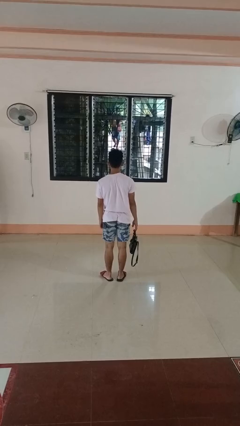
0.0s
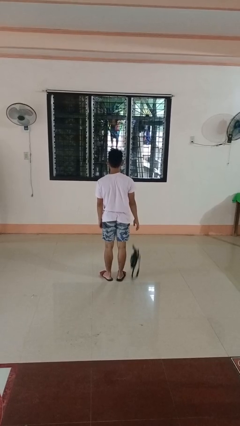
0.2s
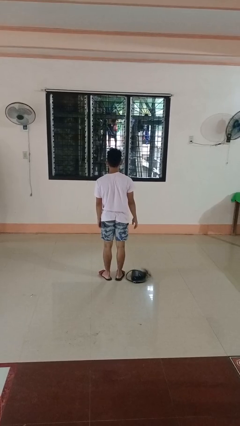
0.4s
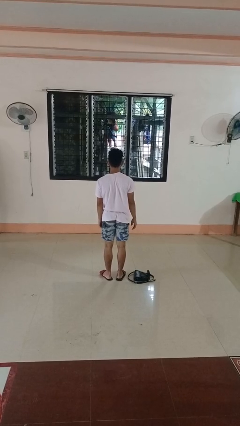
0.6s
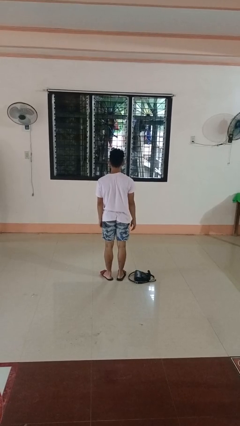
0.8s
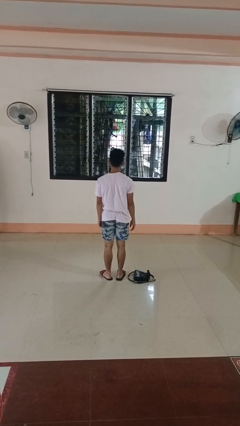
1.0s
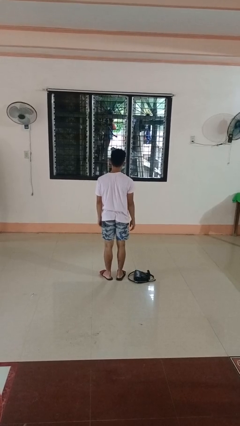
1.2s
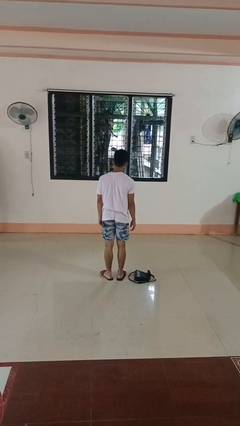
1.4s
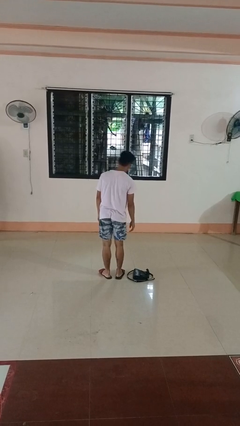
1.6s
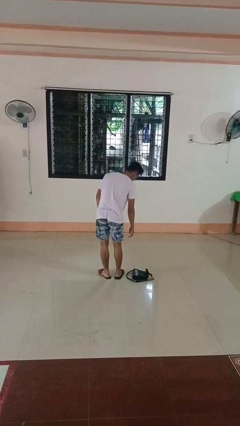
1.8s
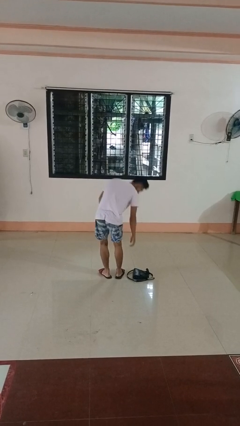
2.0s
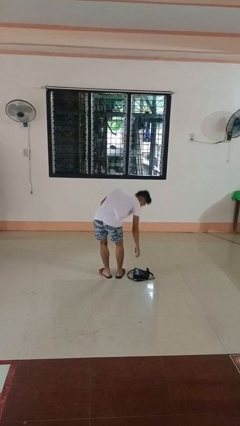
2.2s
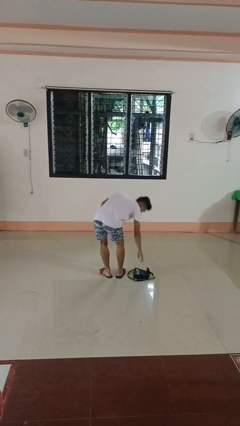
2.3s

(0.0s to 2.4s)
person drops object

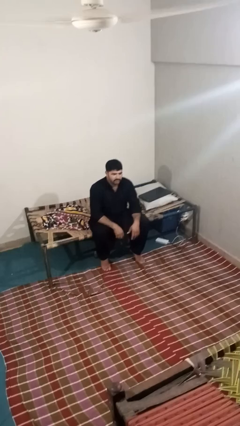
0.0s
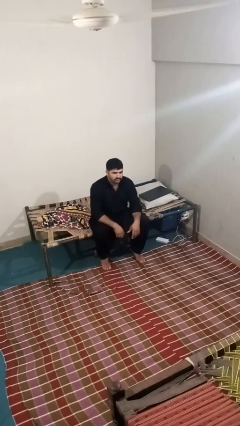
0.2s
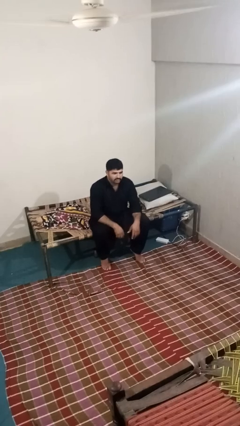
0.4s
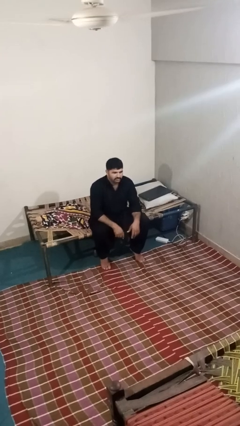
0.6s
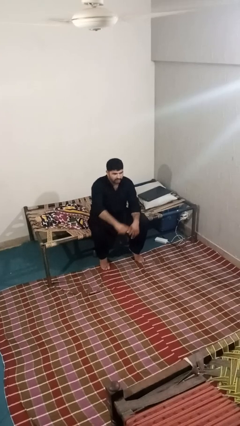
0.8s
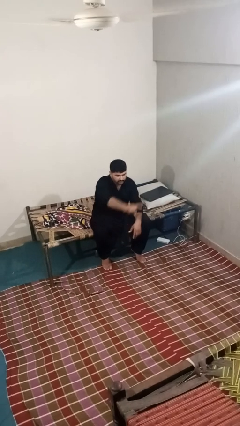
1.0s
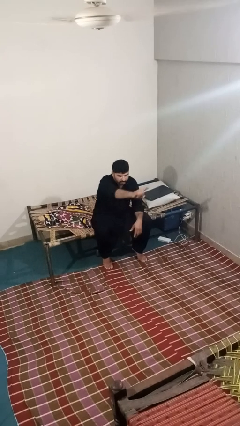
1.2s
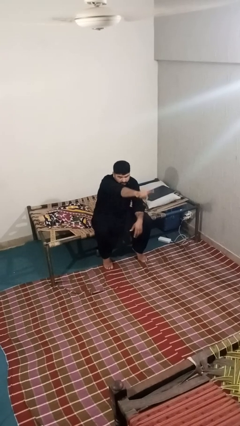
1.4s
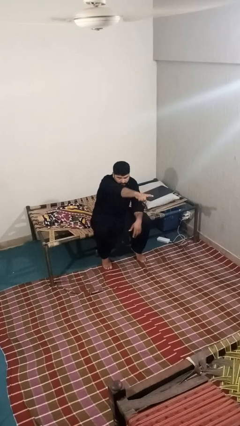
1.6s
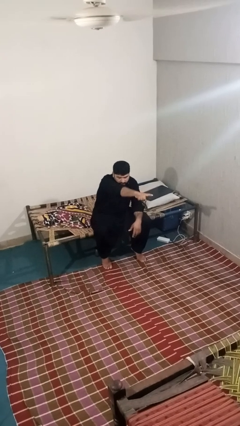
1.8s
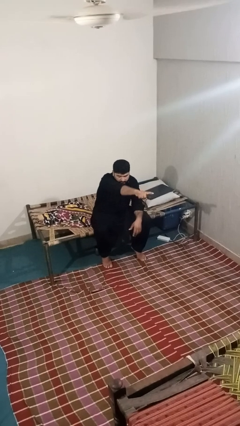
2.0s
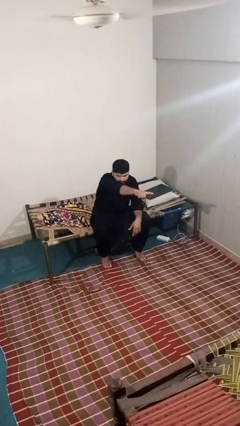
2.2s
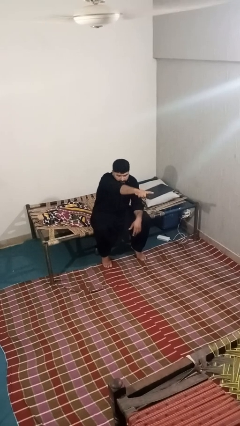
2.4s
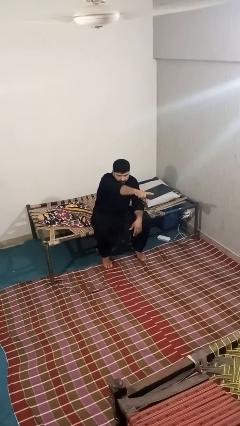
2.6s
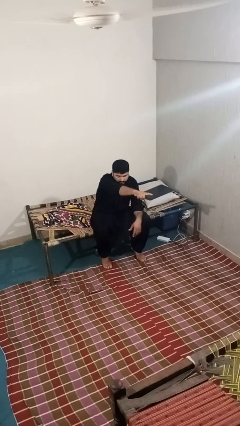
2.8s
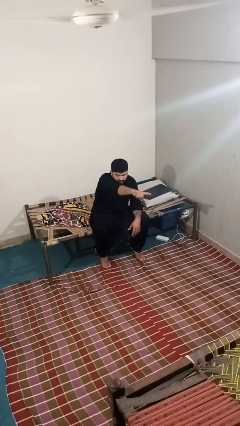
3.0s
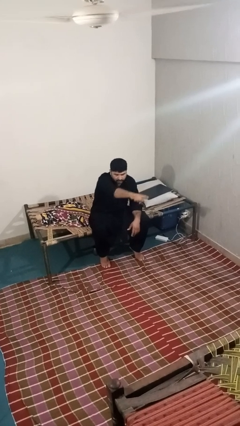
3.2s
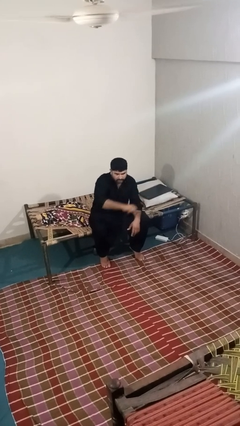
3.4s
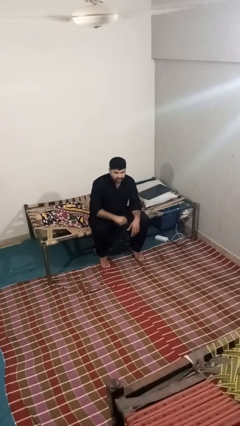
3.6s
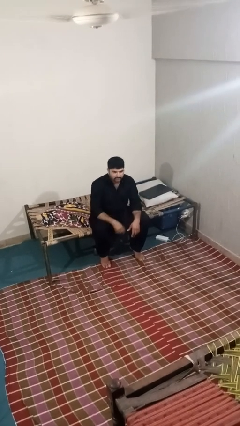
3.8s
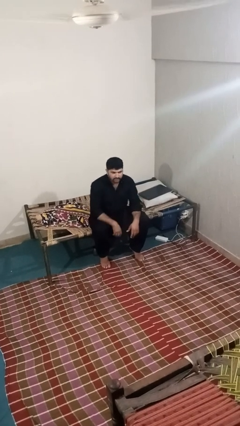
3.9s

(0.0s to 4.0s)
person points at person

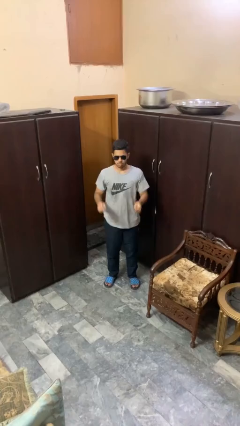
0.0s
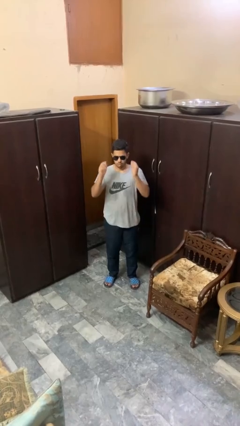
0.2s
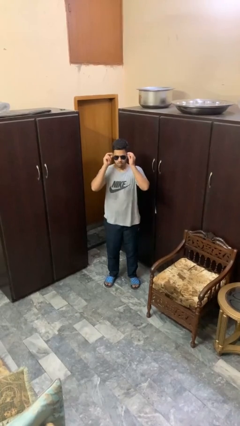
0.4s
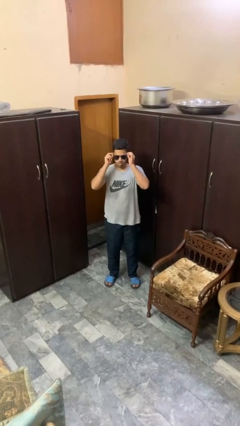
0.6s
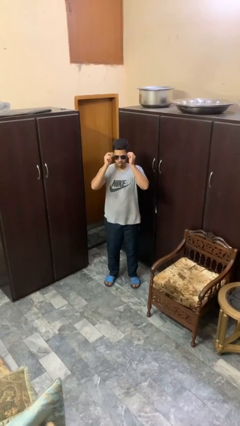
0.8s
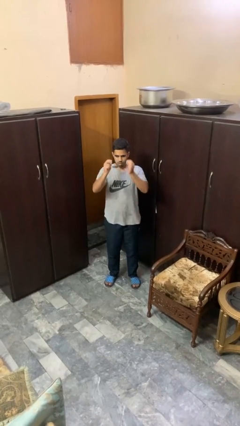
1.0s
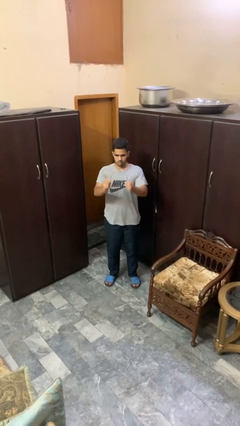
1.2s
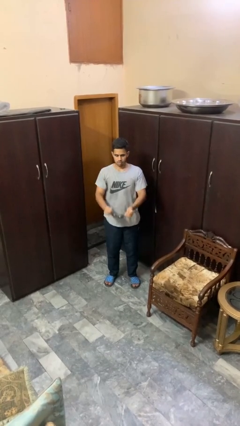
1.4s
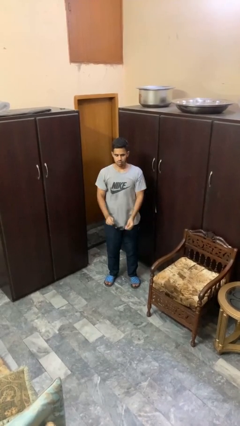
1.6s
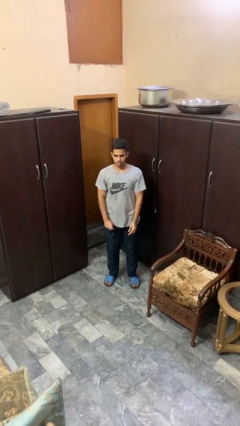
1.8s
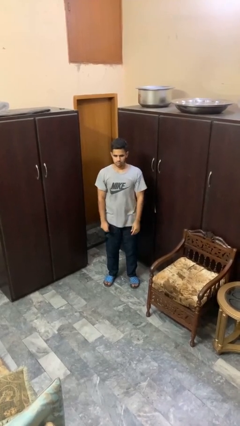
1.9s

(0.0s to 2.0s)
person takes off sunglasses

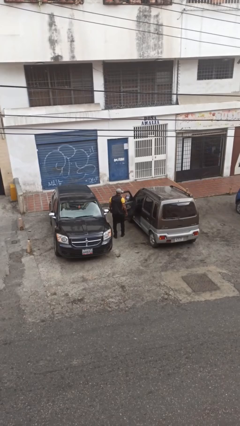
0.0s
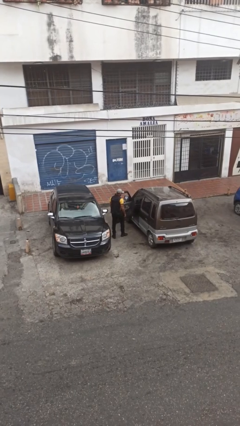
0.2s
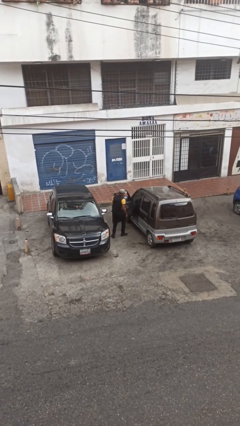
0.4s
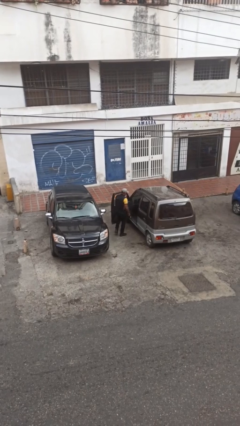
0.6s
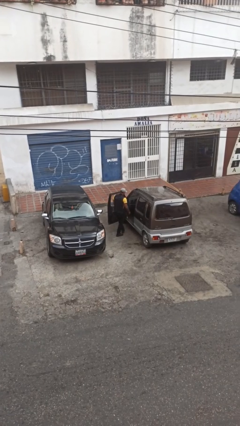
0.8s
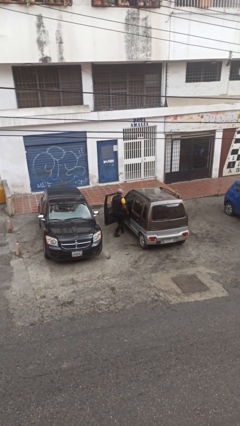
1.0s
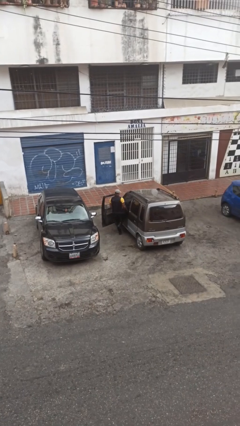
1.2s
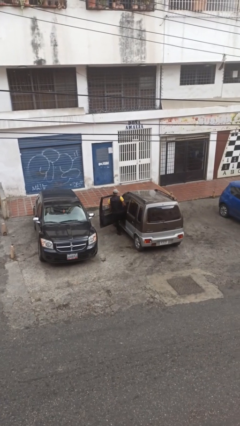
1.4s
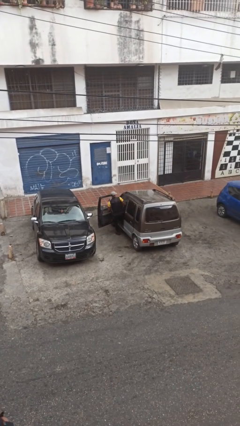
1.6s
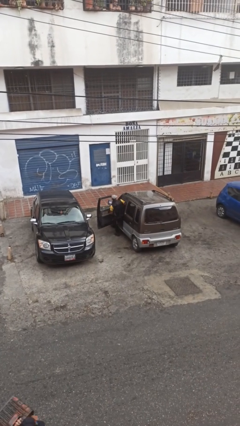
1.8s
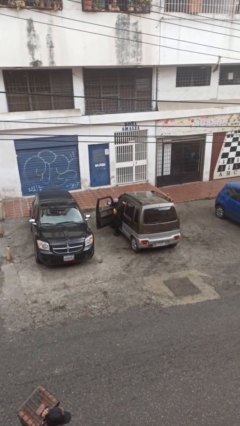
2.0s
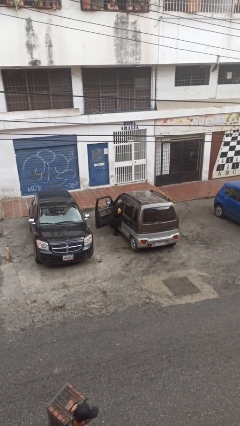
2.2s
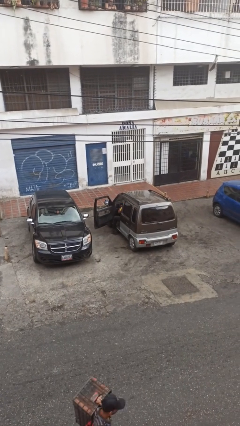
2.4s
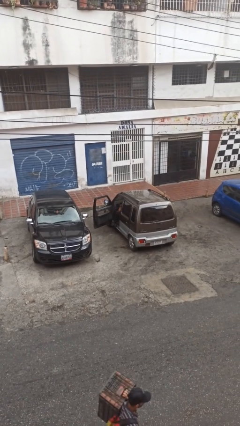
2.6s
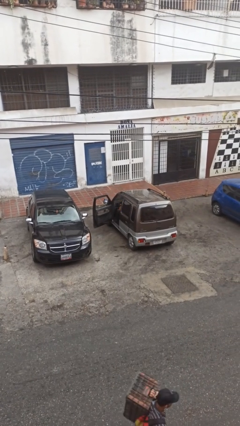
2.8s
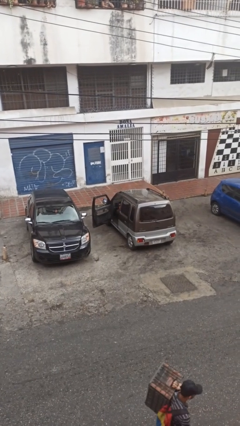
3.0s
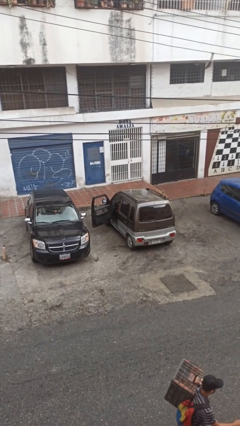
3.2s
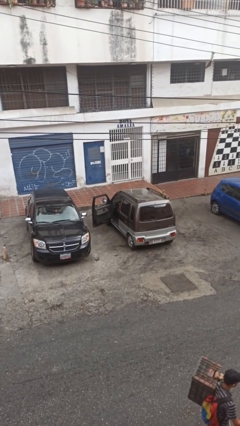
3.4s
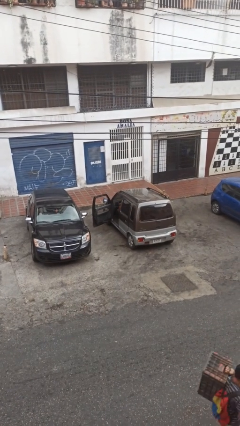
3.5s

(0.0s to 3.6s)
person enters car

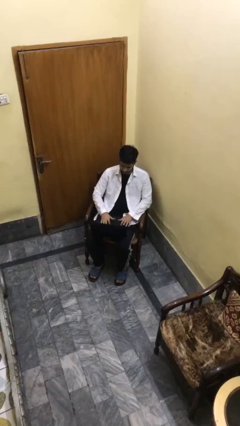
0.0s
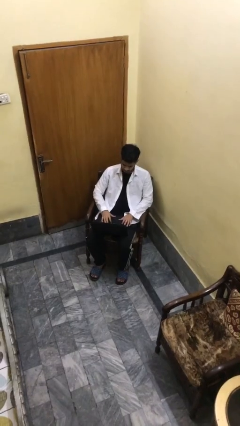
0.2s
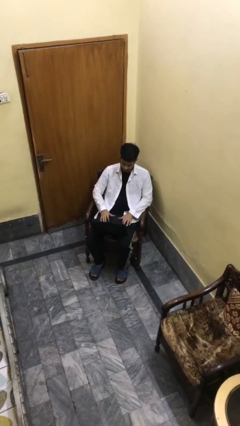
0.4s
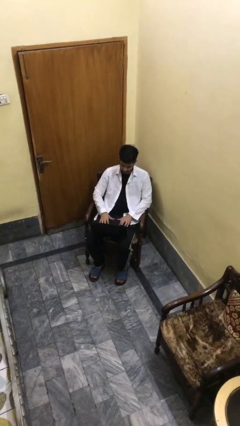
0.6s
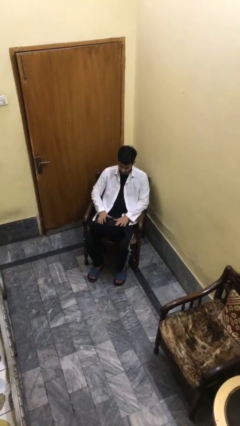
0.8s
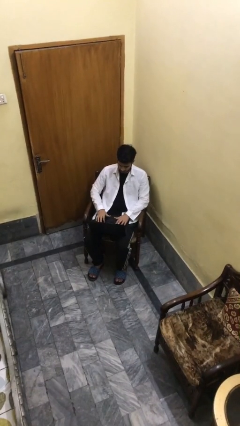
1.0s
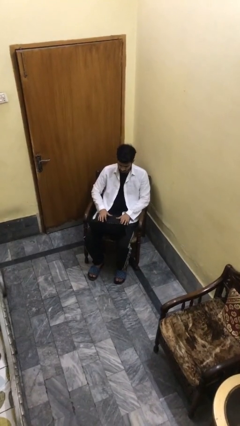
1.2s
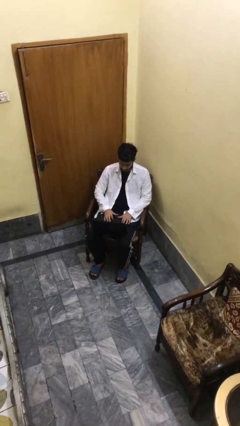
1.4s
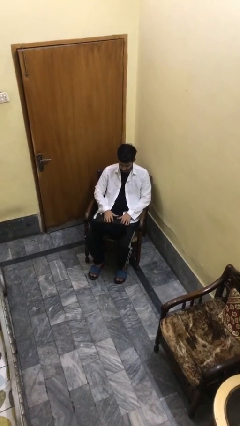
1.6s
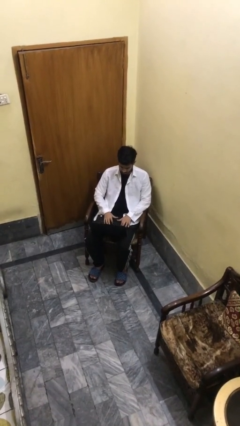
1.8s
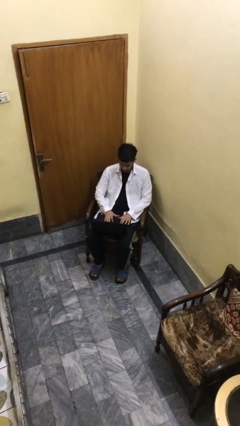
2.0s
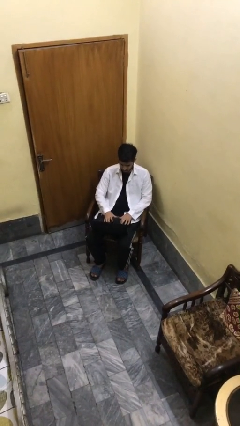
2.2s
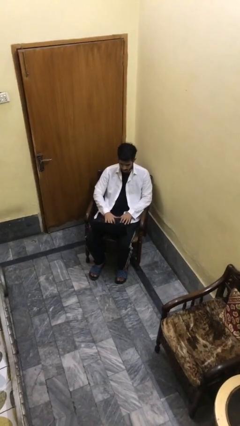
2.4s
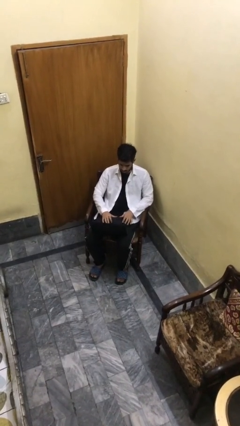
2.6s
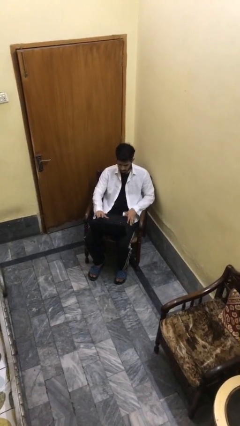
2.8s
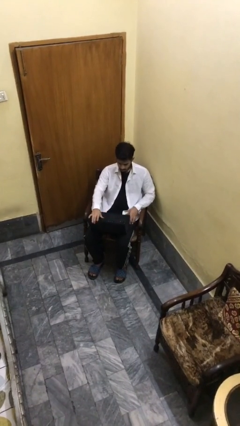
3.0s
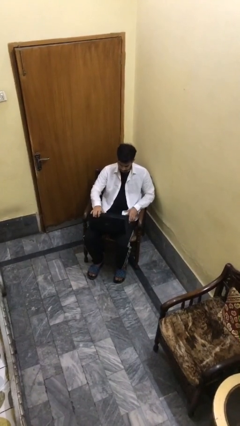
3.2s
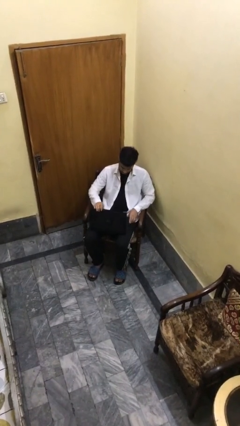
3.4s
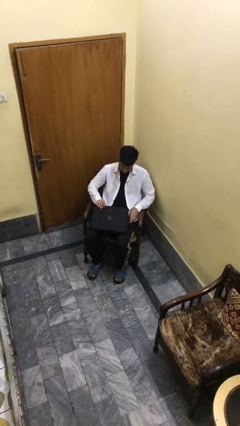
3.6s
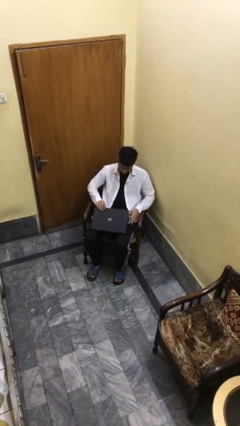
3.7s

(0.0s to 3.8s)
person interacts with laptop

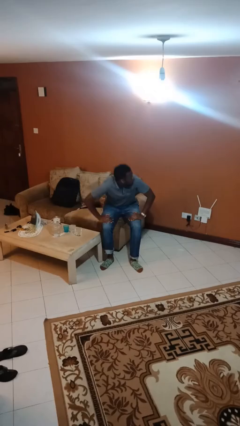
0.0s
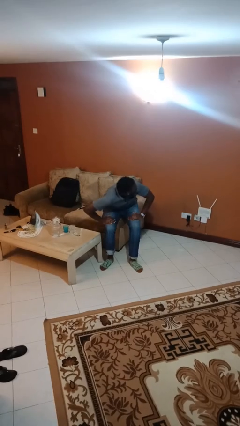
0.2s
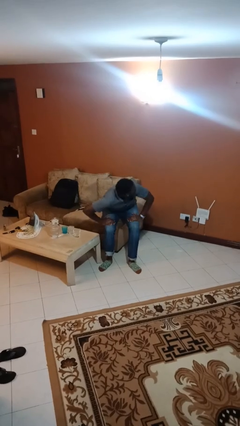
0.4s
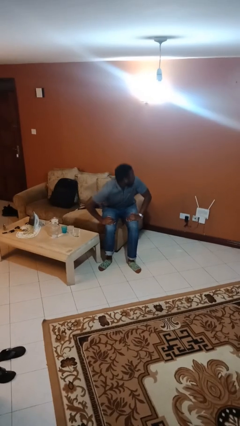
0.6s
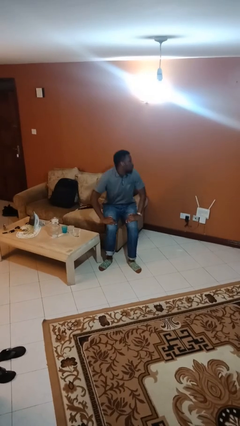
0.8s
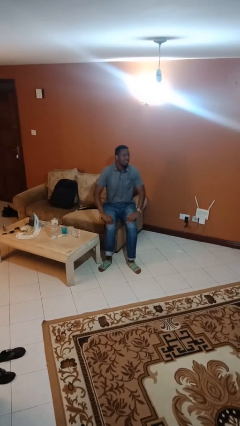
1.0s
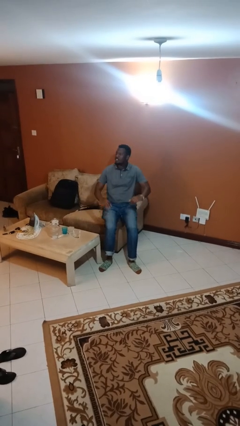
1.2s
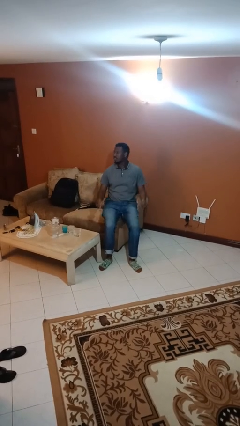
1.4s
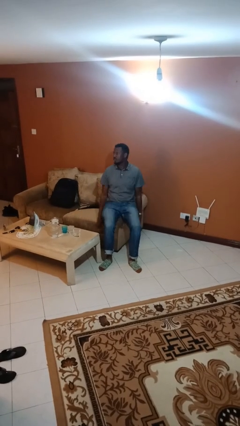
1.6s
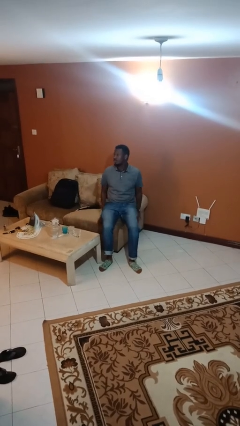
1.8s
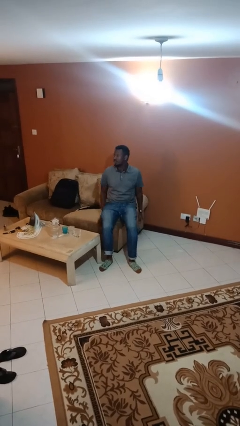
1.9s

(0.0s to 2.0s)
person slaps hands on thighs
